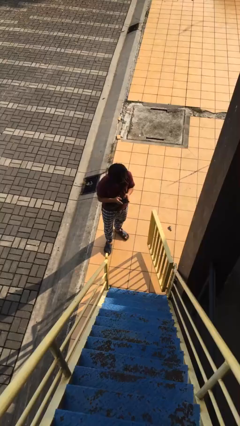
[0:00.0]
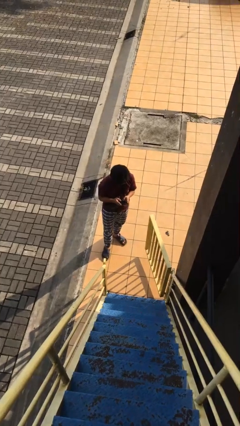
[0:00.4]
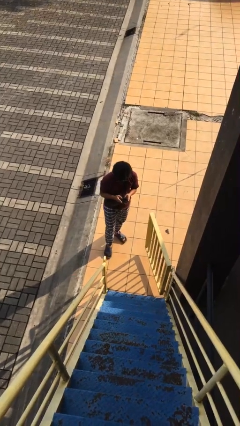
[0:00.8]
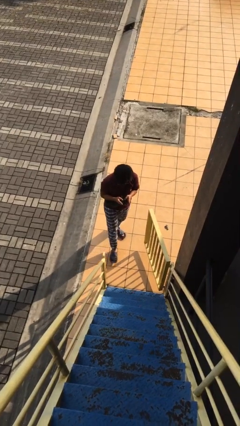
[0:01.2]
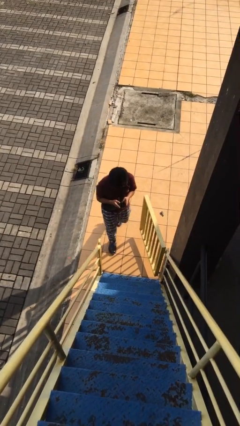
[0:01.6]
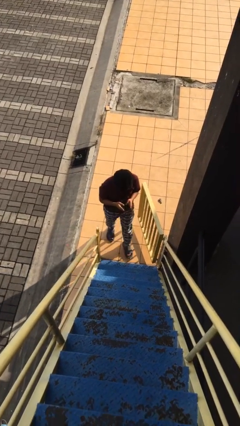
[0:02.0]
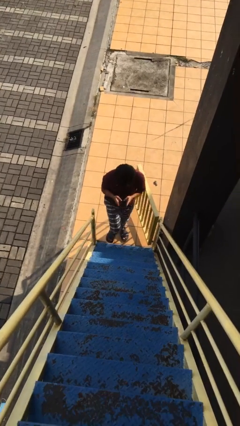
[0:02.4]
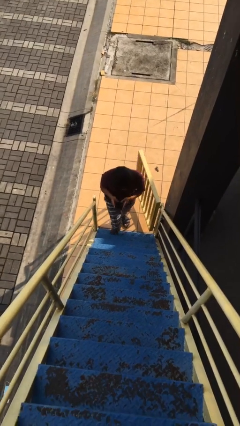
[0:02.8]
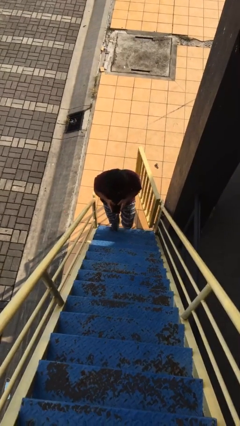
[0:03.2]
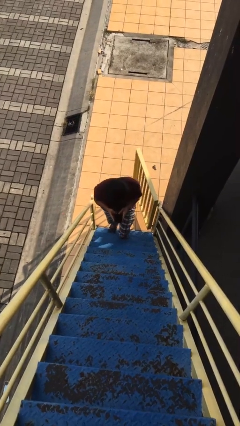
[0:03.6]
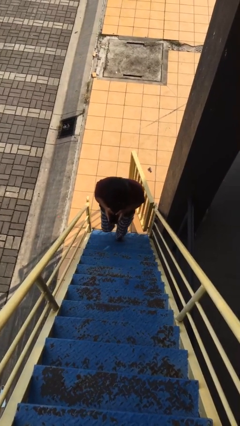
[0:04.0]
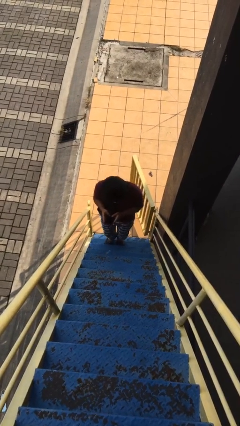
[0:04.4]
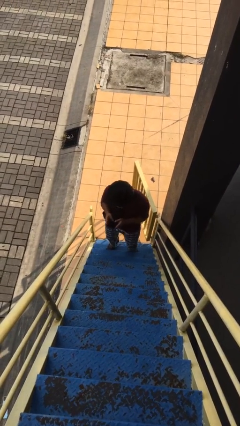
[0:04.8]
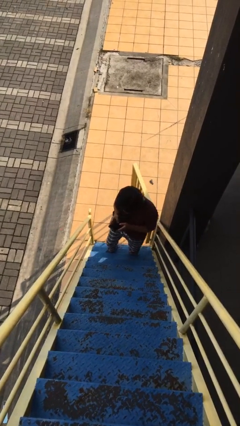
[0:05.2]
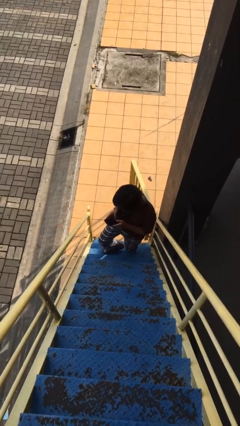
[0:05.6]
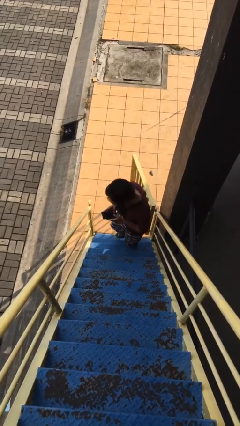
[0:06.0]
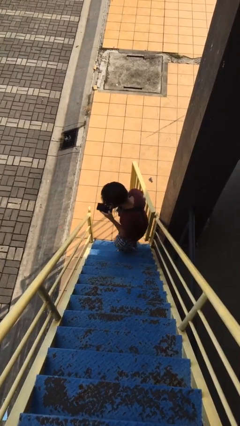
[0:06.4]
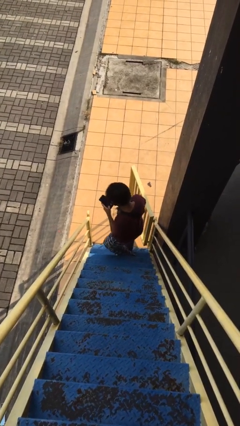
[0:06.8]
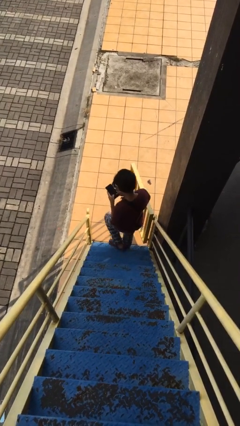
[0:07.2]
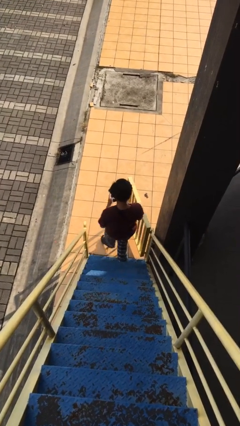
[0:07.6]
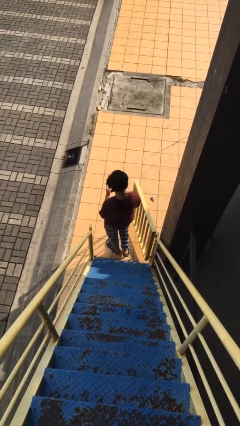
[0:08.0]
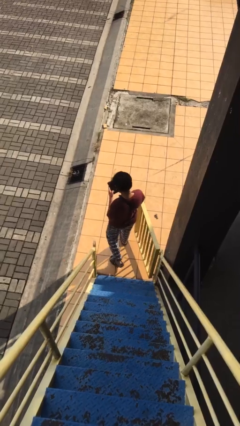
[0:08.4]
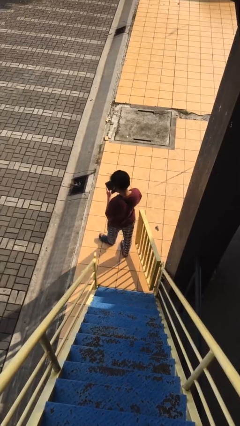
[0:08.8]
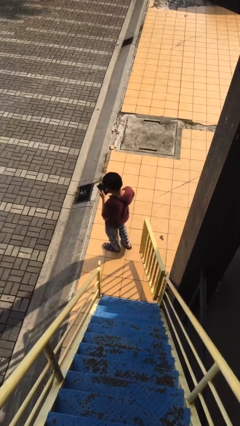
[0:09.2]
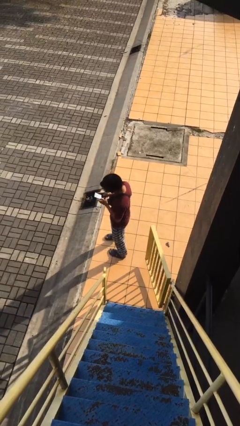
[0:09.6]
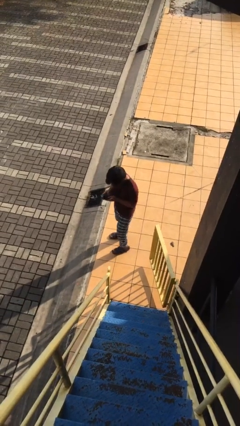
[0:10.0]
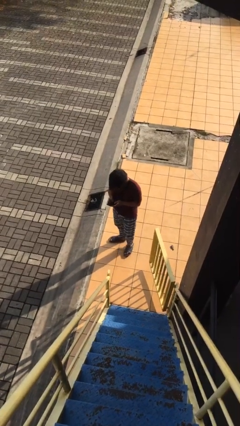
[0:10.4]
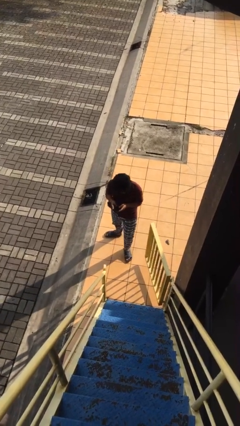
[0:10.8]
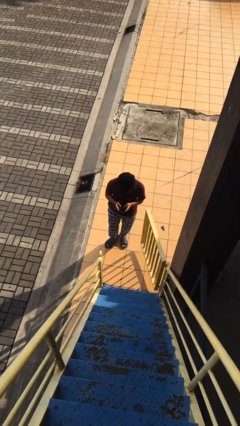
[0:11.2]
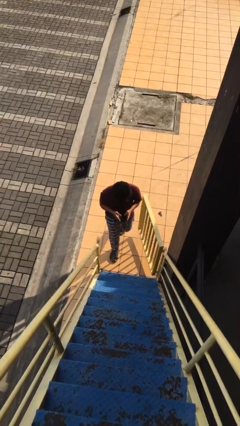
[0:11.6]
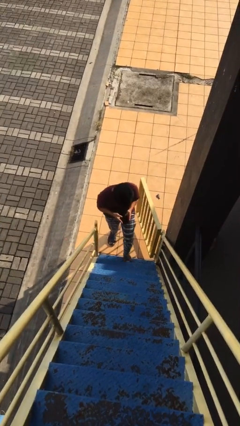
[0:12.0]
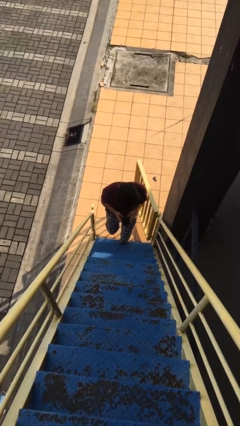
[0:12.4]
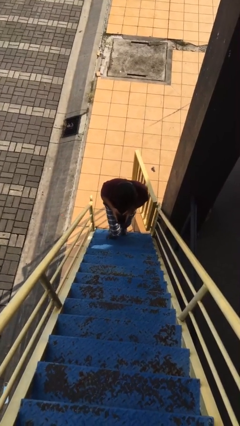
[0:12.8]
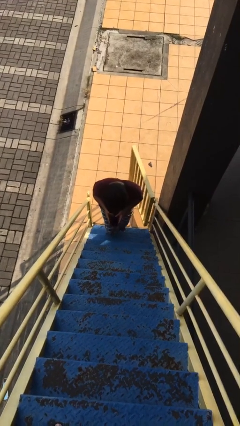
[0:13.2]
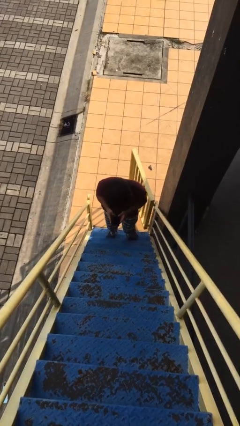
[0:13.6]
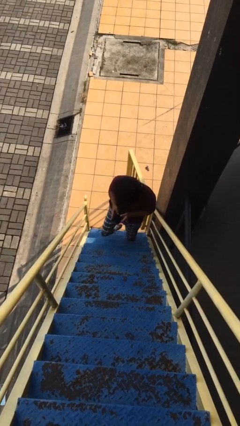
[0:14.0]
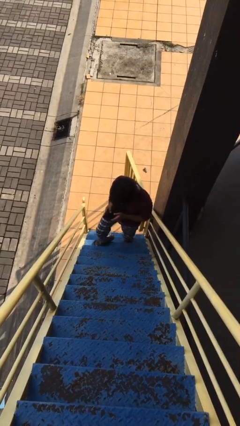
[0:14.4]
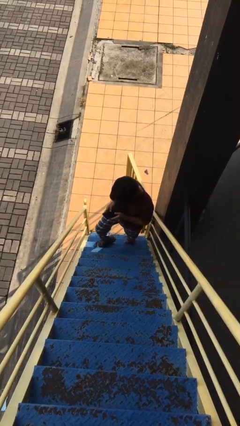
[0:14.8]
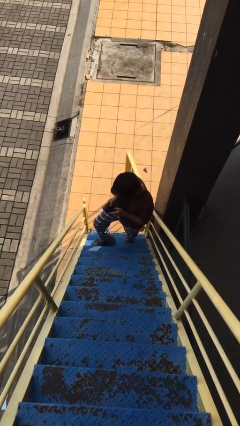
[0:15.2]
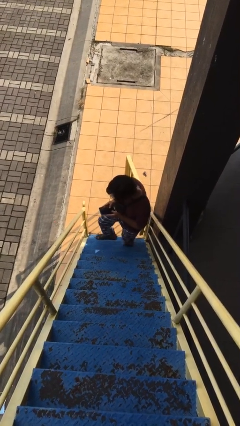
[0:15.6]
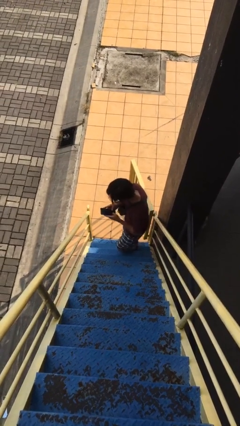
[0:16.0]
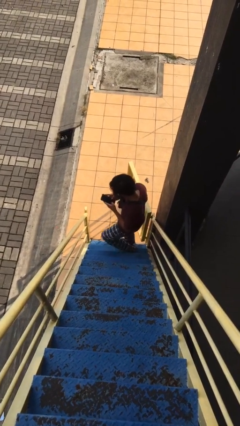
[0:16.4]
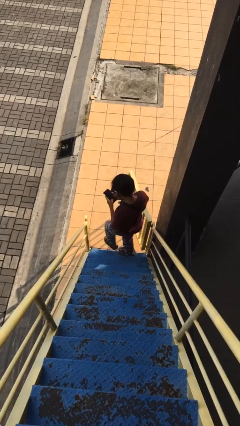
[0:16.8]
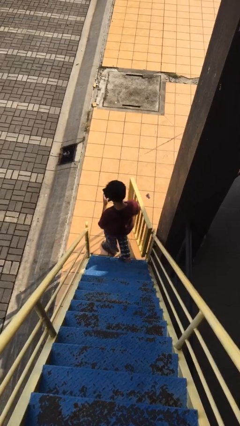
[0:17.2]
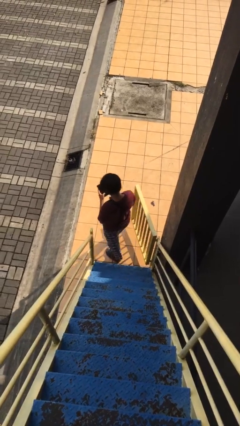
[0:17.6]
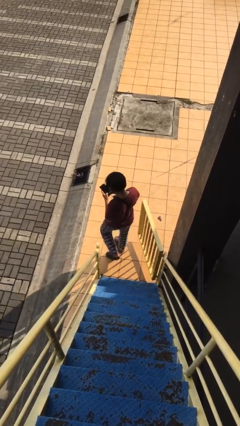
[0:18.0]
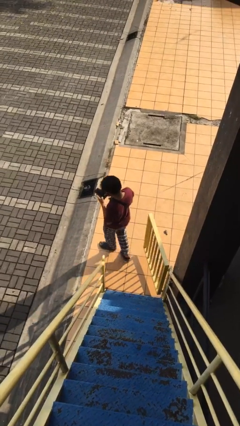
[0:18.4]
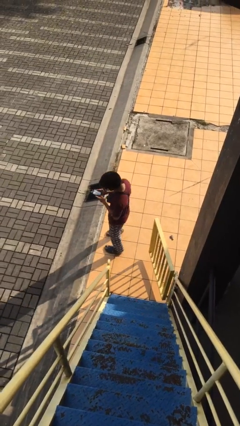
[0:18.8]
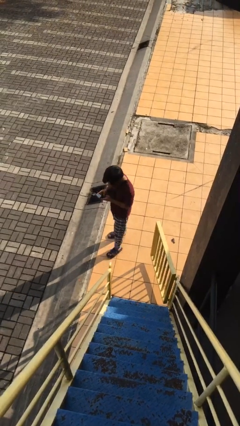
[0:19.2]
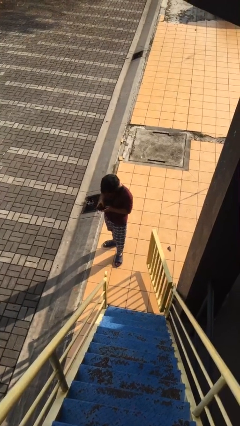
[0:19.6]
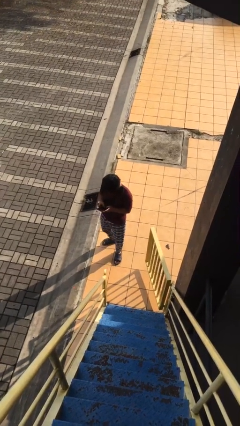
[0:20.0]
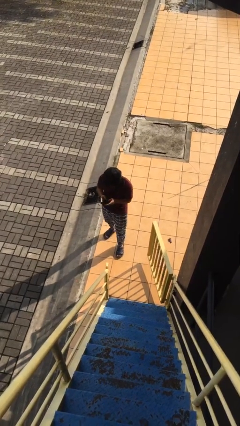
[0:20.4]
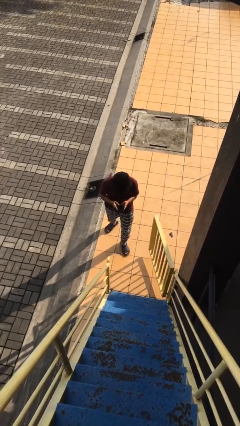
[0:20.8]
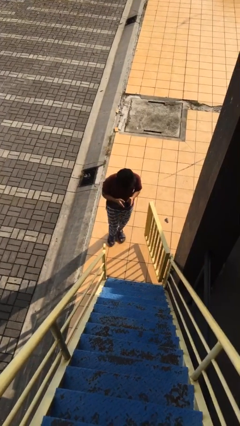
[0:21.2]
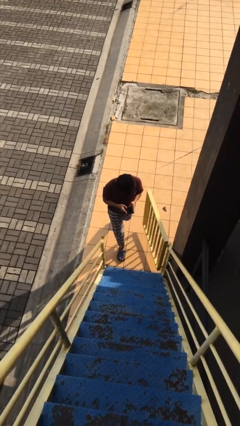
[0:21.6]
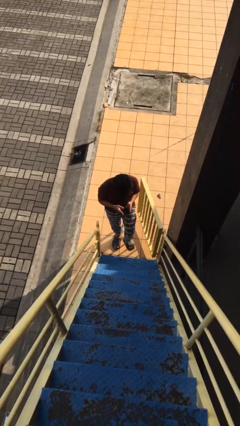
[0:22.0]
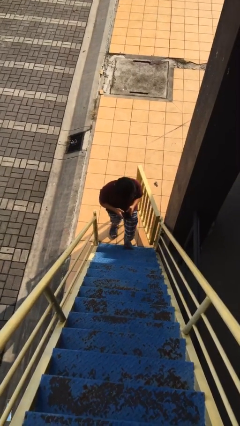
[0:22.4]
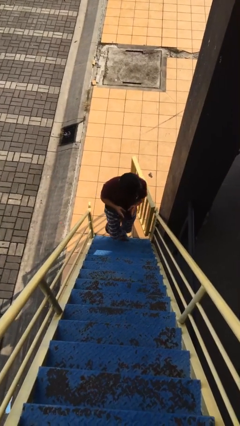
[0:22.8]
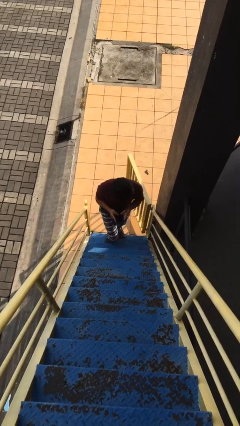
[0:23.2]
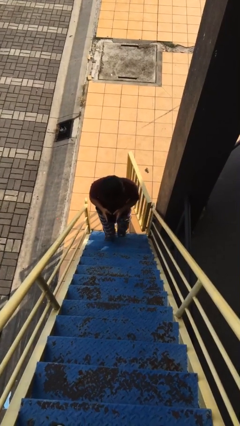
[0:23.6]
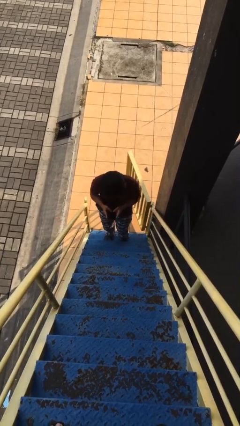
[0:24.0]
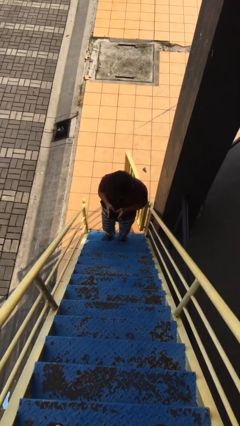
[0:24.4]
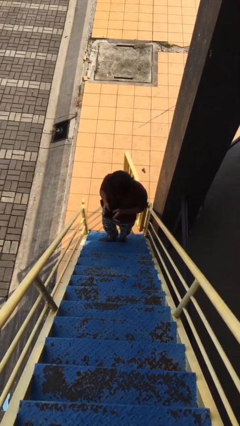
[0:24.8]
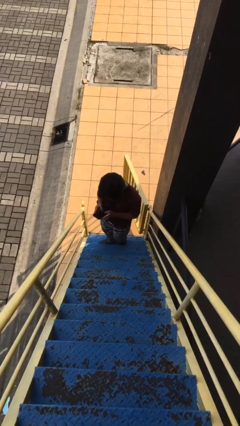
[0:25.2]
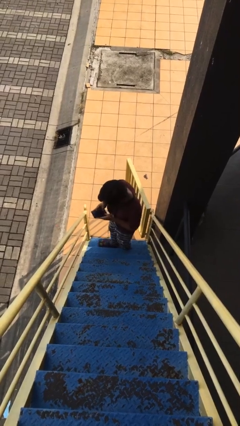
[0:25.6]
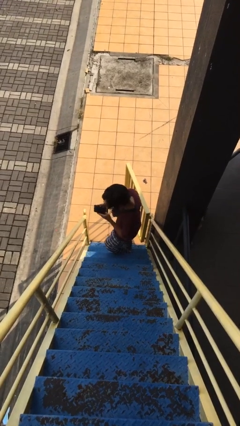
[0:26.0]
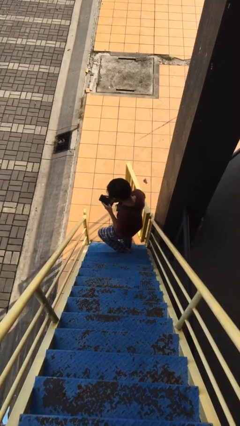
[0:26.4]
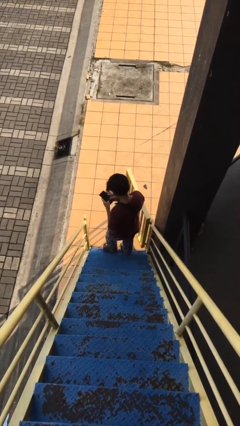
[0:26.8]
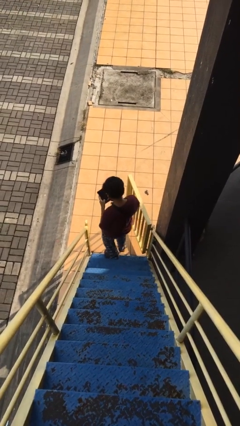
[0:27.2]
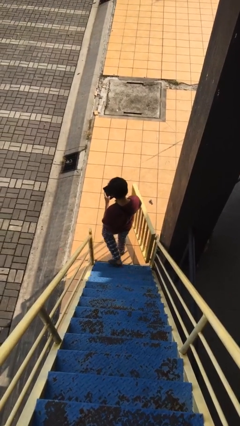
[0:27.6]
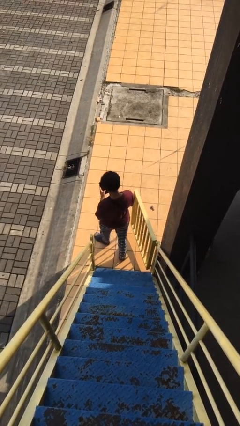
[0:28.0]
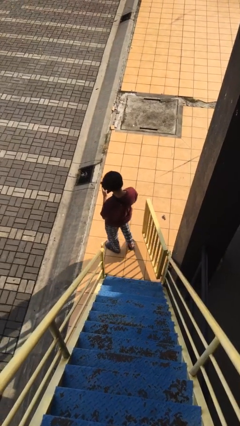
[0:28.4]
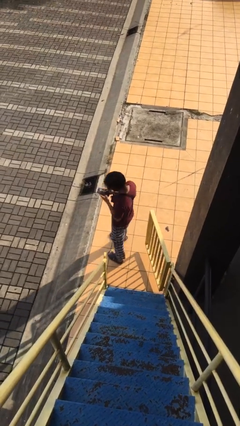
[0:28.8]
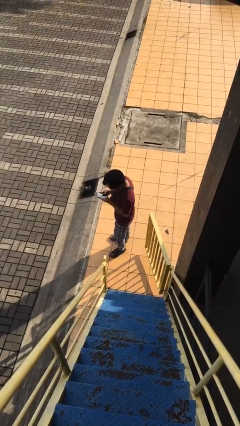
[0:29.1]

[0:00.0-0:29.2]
person texts on phone

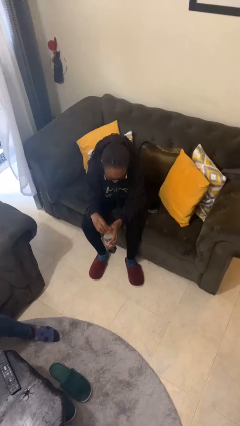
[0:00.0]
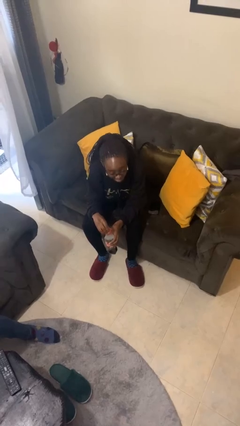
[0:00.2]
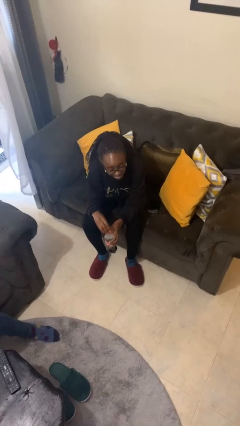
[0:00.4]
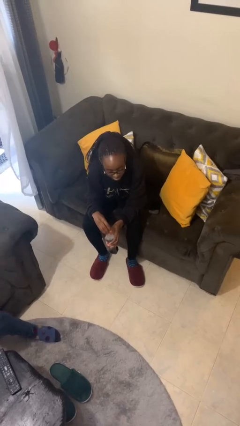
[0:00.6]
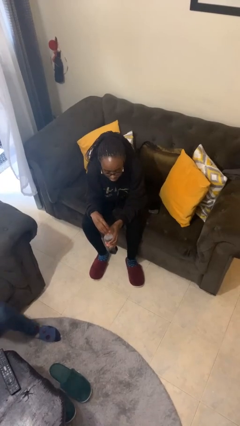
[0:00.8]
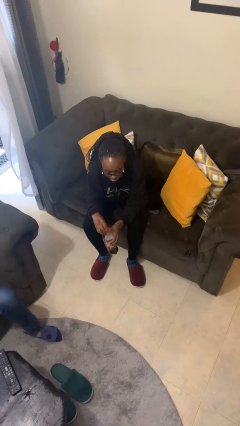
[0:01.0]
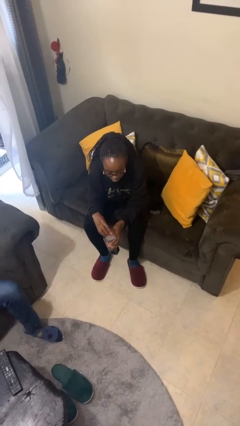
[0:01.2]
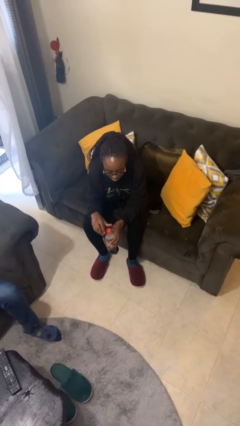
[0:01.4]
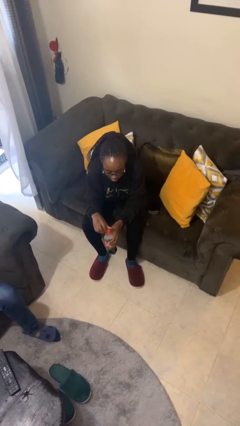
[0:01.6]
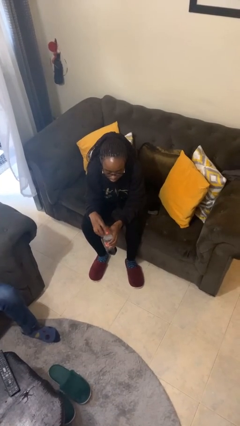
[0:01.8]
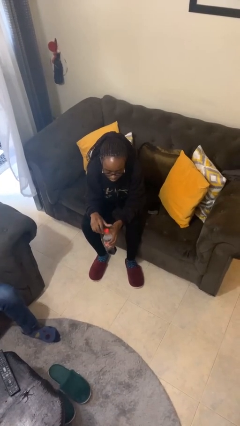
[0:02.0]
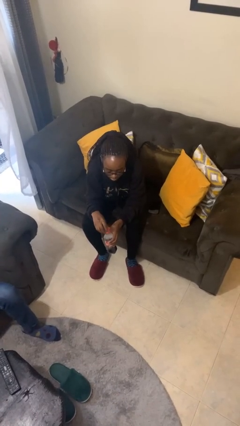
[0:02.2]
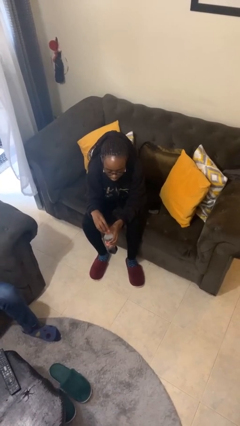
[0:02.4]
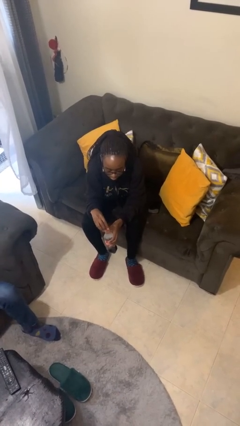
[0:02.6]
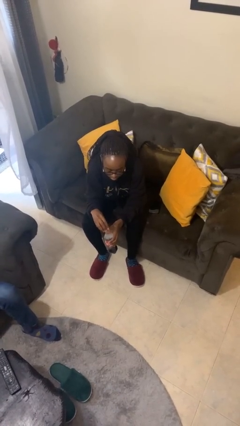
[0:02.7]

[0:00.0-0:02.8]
person unscrews lid from bottle

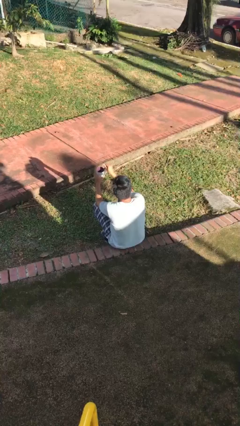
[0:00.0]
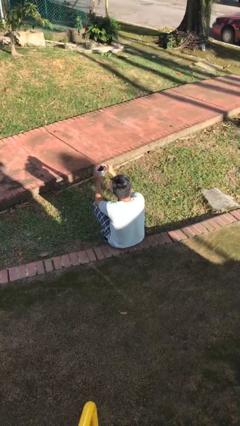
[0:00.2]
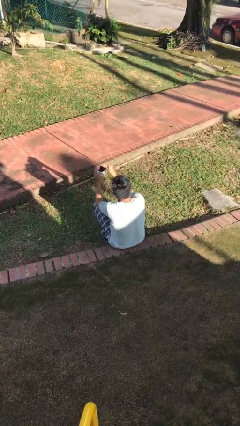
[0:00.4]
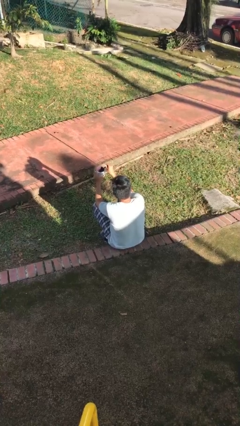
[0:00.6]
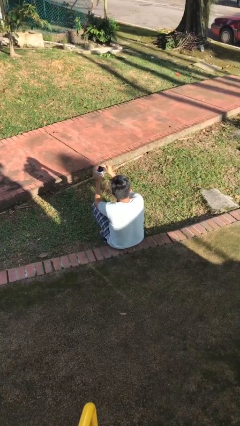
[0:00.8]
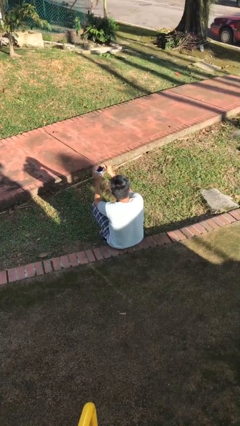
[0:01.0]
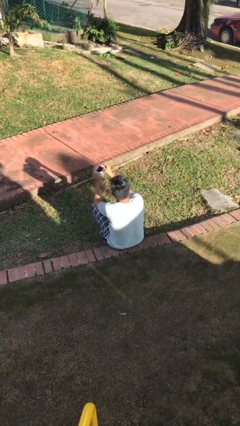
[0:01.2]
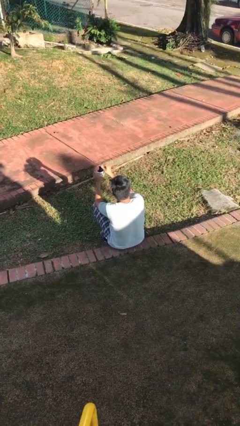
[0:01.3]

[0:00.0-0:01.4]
person stirs mug
